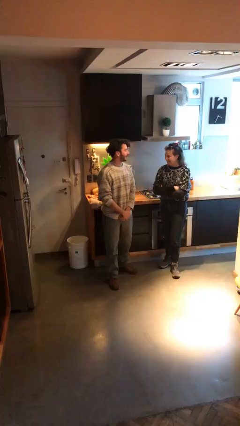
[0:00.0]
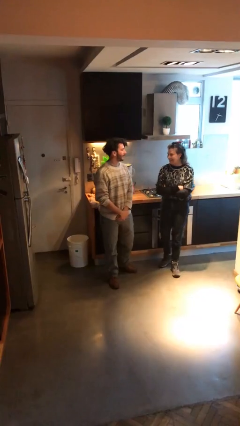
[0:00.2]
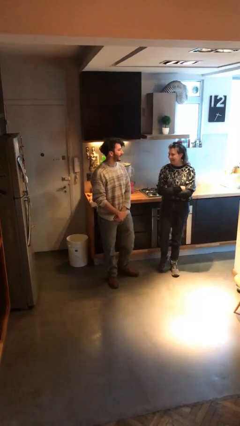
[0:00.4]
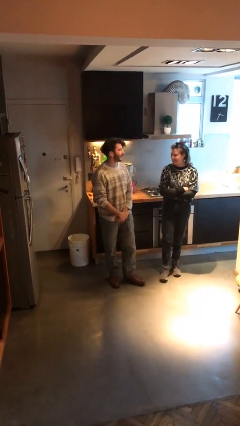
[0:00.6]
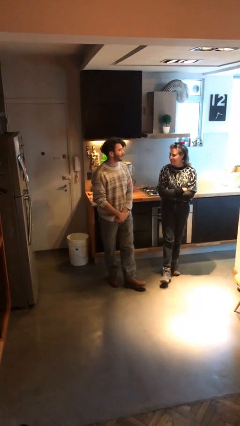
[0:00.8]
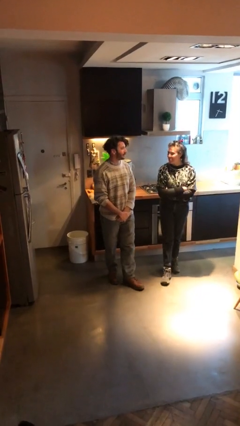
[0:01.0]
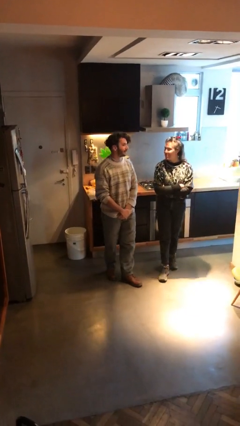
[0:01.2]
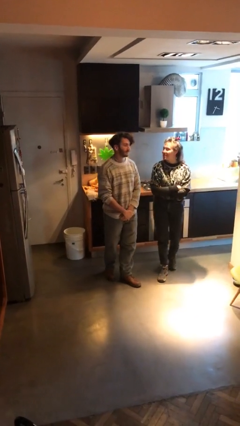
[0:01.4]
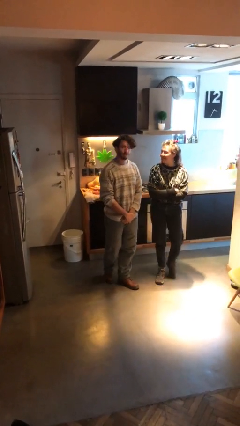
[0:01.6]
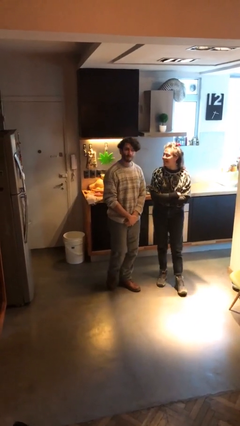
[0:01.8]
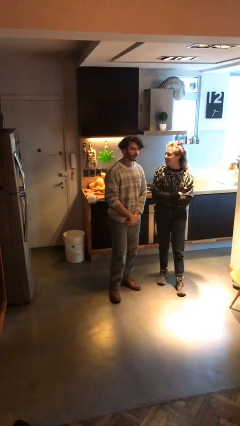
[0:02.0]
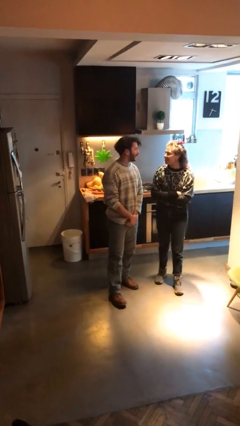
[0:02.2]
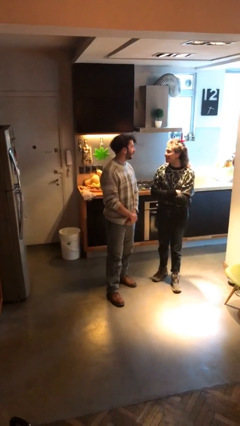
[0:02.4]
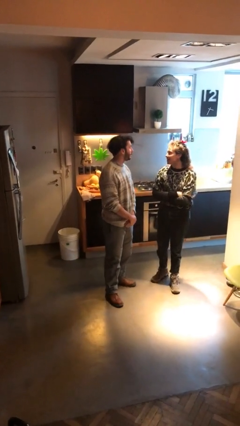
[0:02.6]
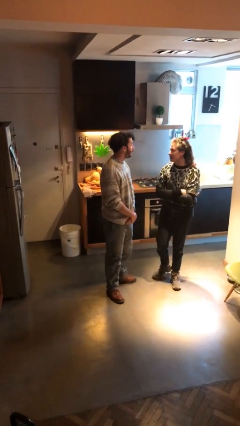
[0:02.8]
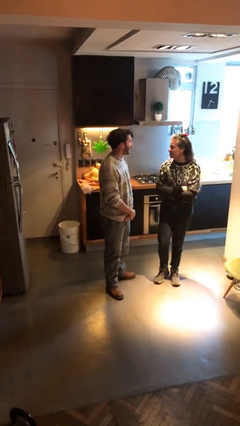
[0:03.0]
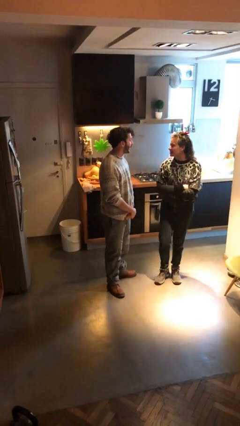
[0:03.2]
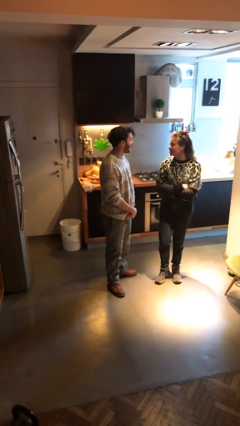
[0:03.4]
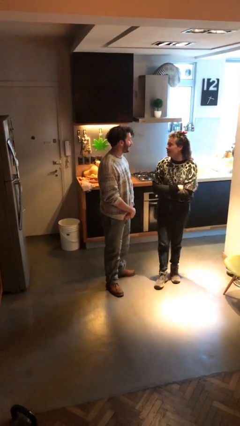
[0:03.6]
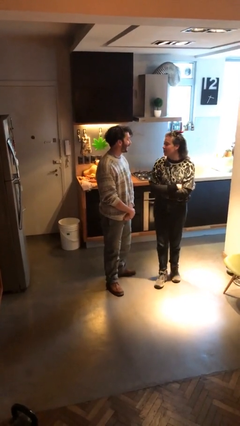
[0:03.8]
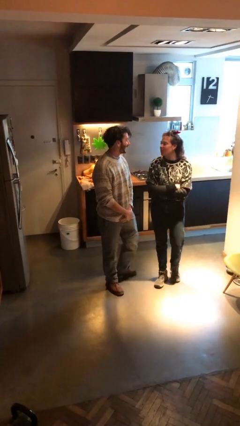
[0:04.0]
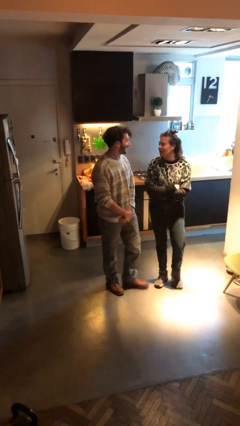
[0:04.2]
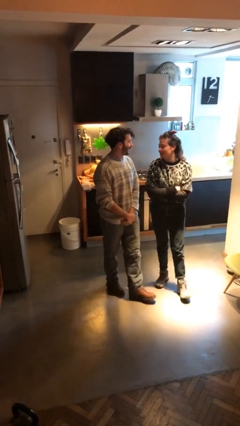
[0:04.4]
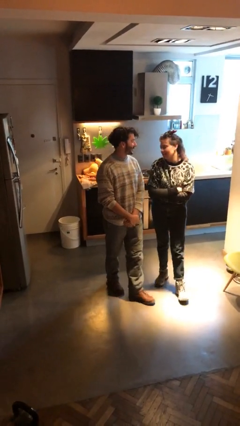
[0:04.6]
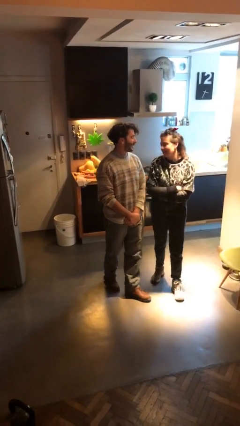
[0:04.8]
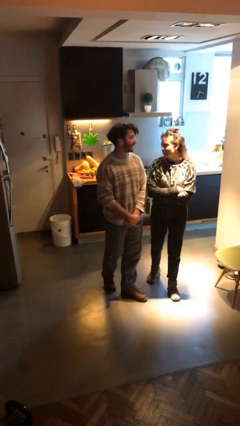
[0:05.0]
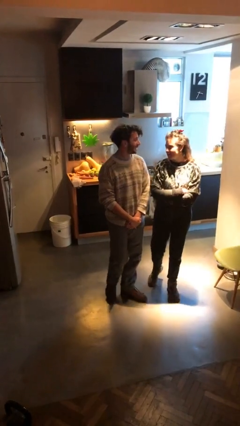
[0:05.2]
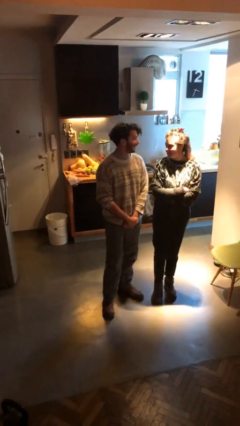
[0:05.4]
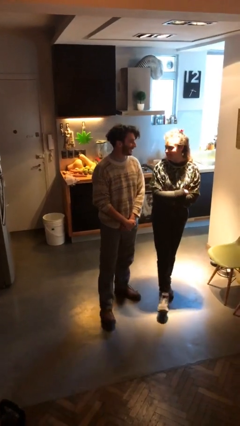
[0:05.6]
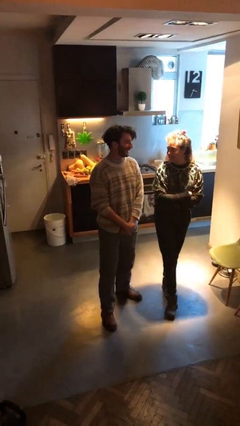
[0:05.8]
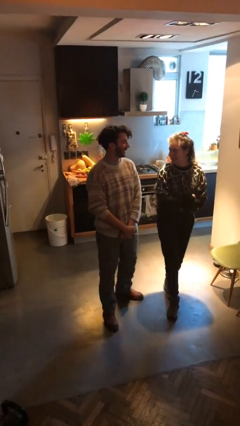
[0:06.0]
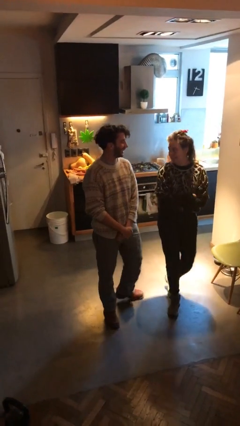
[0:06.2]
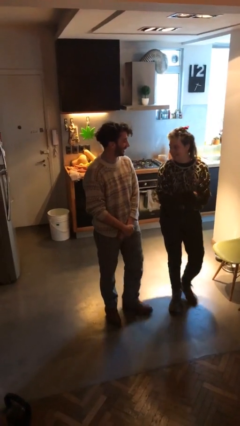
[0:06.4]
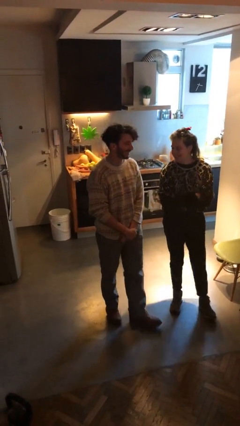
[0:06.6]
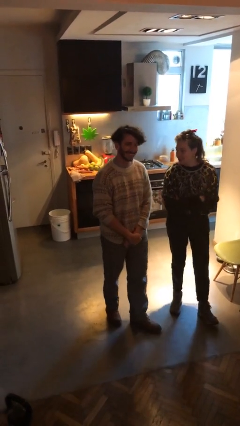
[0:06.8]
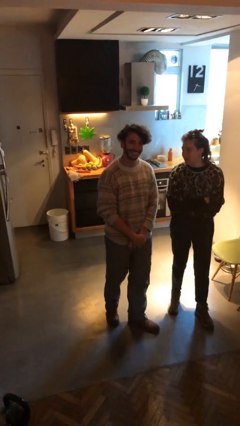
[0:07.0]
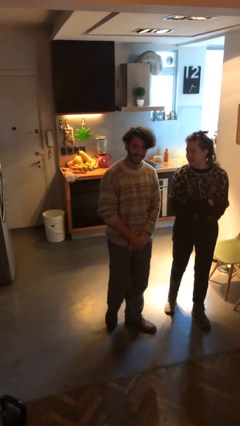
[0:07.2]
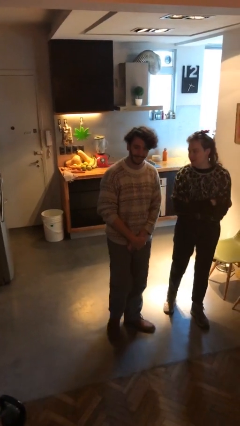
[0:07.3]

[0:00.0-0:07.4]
person talks to person

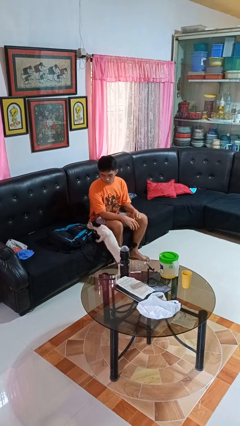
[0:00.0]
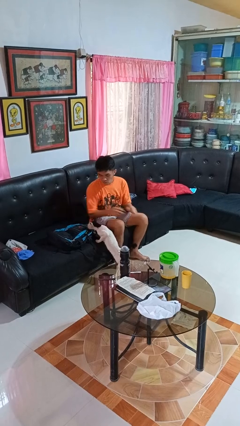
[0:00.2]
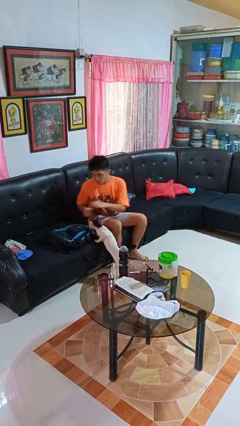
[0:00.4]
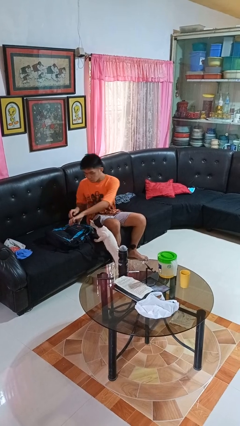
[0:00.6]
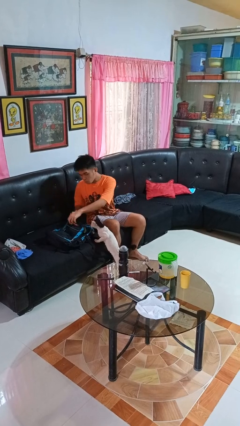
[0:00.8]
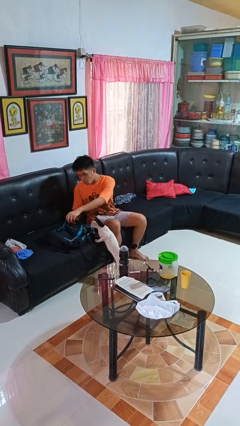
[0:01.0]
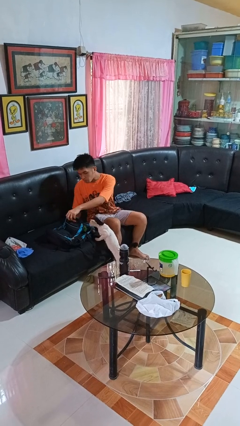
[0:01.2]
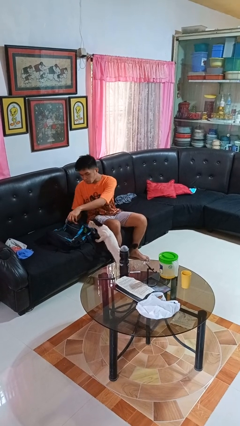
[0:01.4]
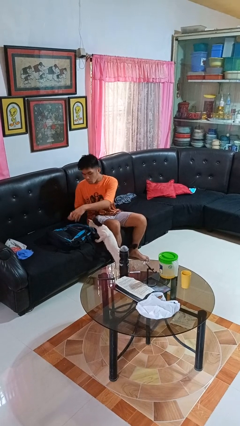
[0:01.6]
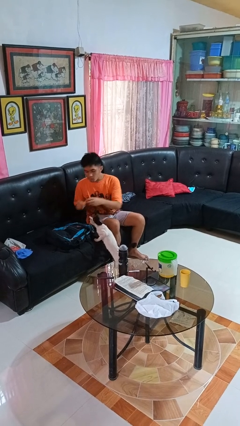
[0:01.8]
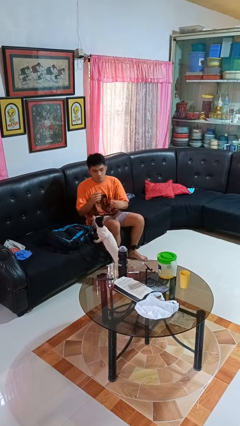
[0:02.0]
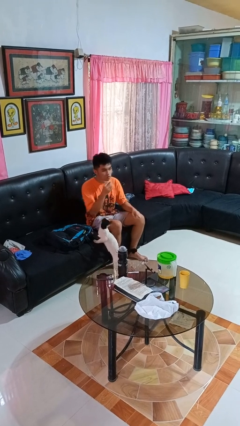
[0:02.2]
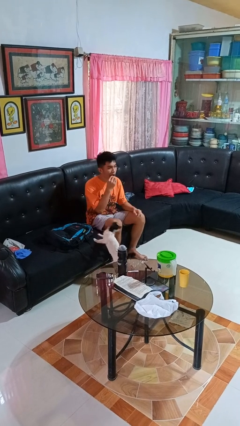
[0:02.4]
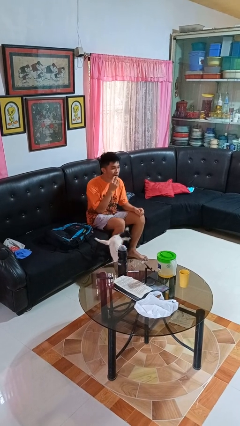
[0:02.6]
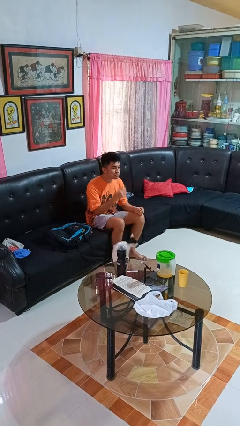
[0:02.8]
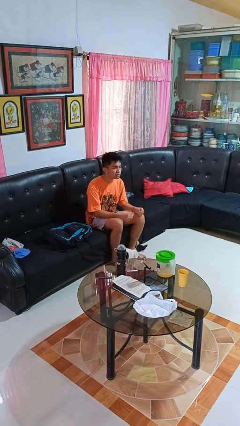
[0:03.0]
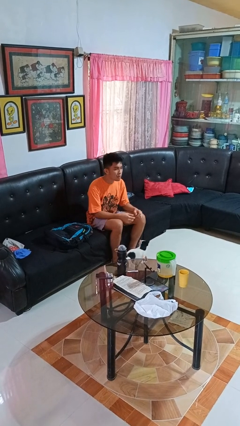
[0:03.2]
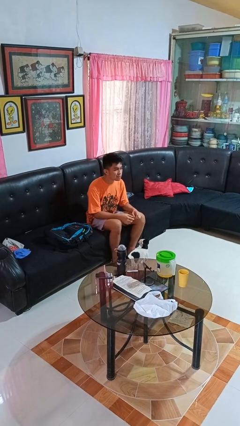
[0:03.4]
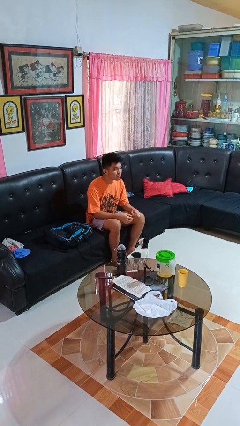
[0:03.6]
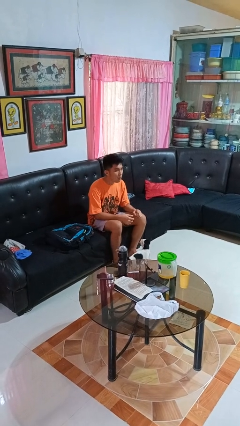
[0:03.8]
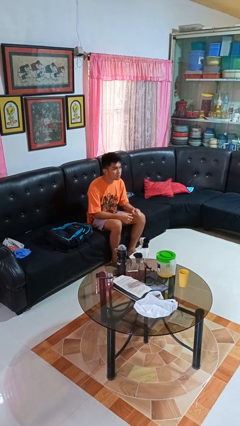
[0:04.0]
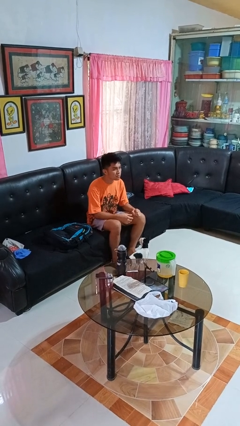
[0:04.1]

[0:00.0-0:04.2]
person eats snack from bag

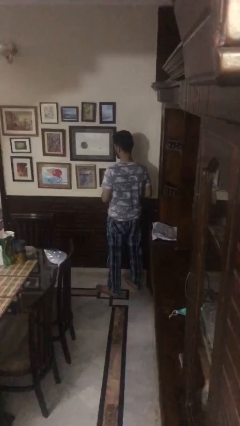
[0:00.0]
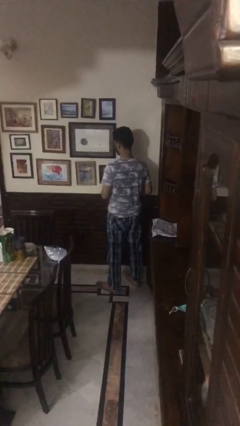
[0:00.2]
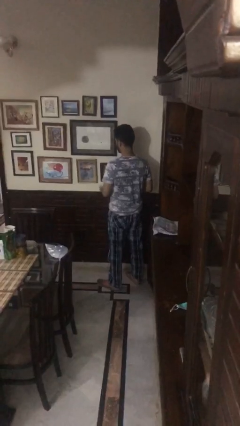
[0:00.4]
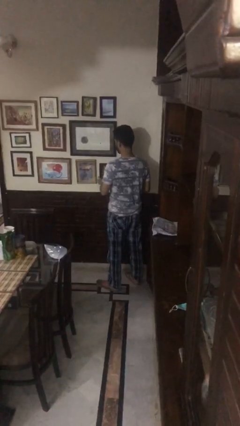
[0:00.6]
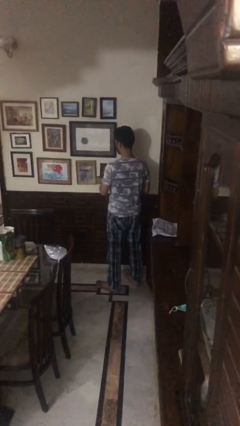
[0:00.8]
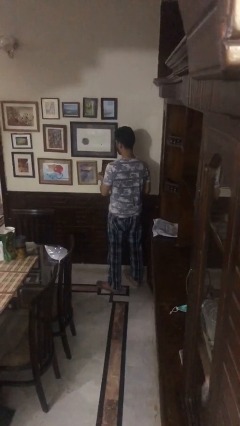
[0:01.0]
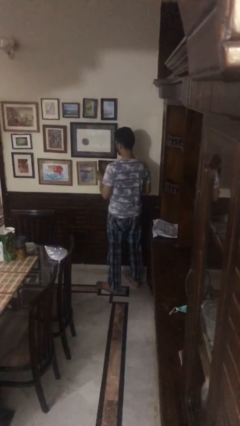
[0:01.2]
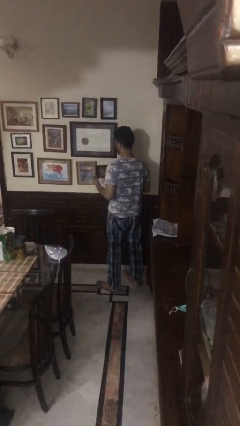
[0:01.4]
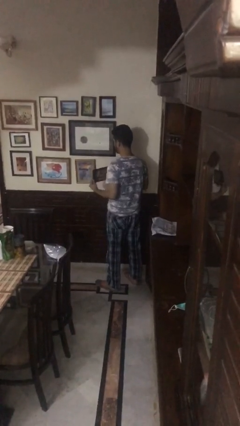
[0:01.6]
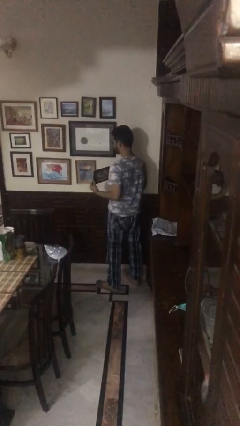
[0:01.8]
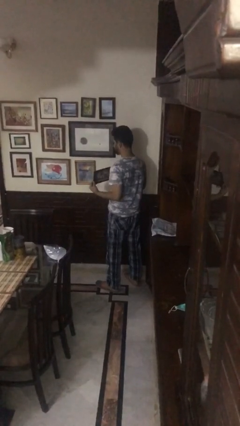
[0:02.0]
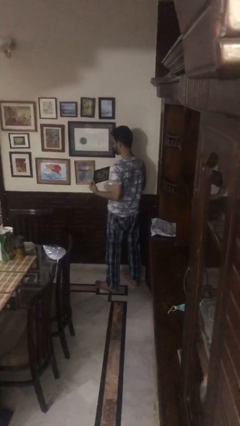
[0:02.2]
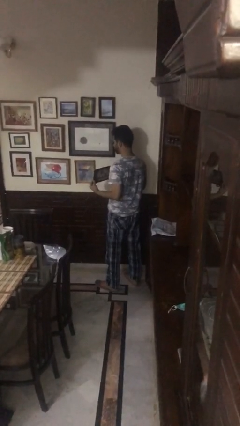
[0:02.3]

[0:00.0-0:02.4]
person takes down picture frame

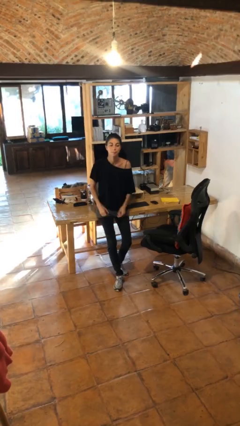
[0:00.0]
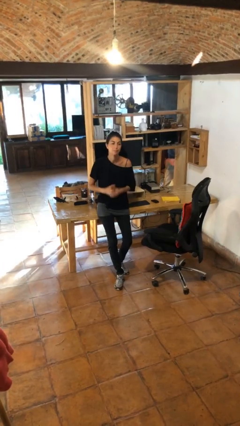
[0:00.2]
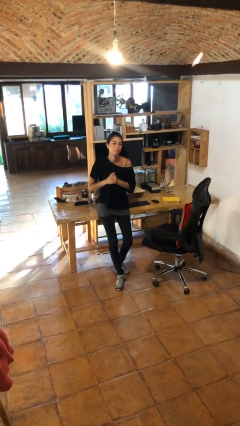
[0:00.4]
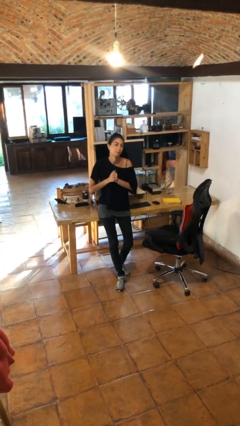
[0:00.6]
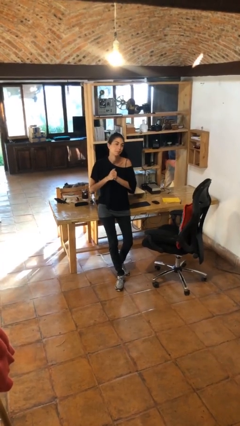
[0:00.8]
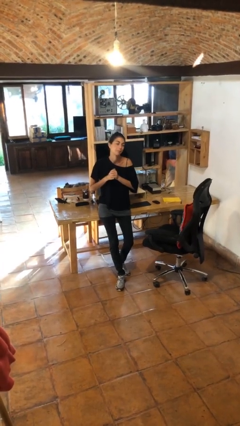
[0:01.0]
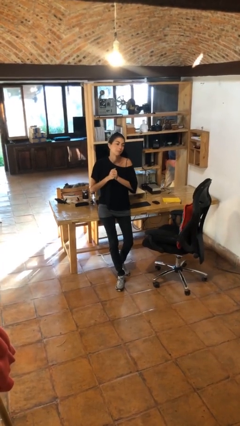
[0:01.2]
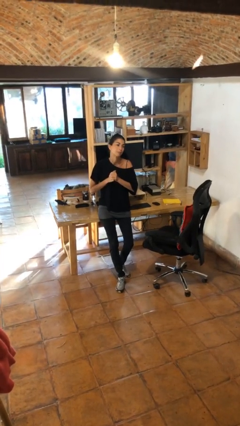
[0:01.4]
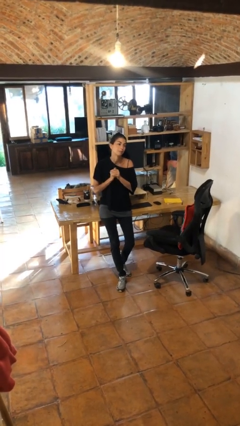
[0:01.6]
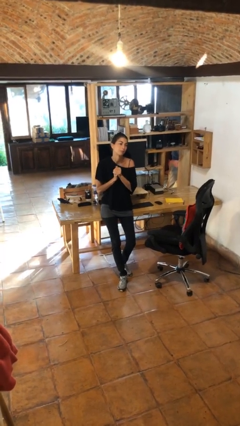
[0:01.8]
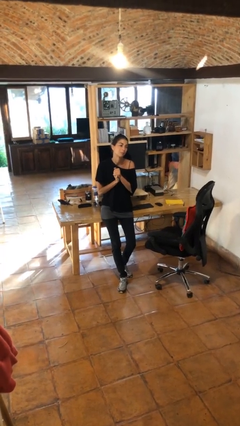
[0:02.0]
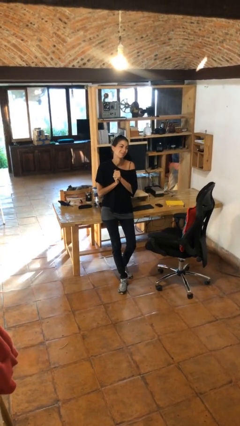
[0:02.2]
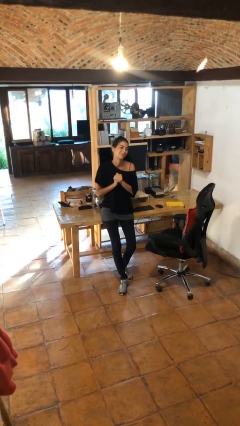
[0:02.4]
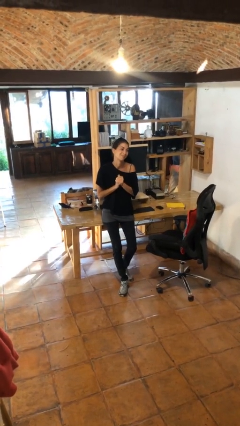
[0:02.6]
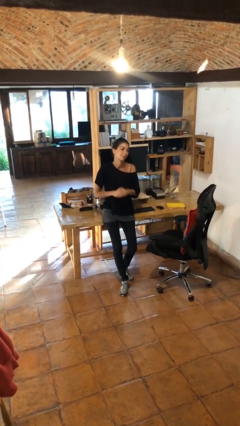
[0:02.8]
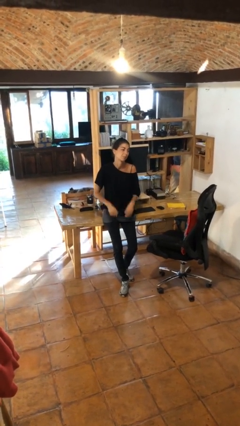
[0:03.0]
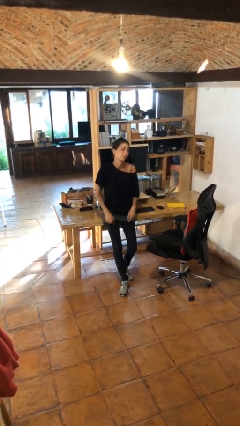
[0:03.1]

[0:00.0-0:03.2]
person cracks knuckles

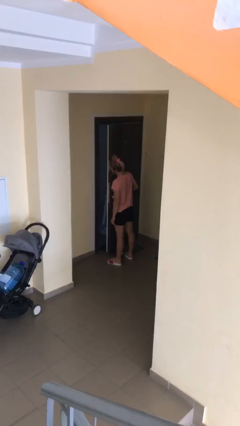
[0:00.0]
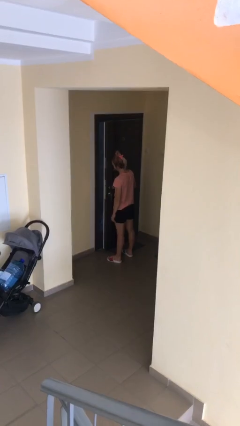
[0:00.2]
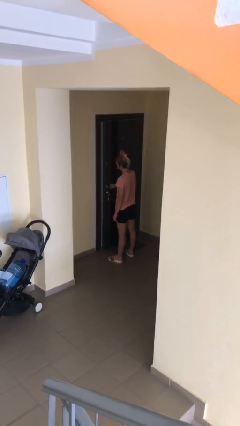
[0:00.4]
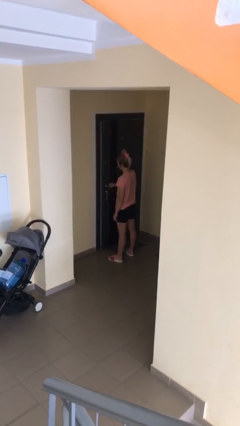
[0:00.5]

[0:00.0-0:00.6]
person closes facility door
